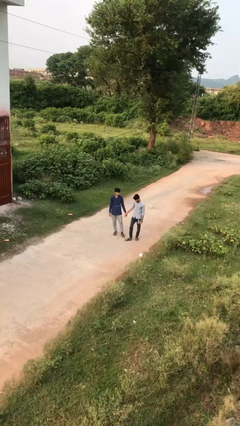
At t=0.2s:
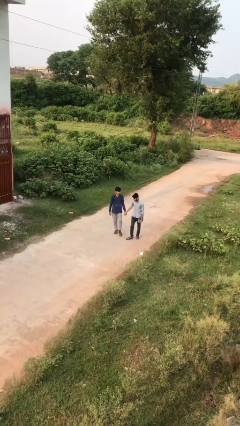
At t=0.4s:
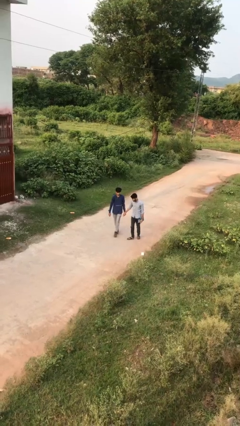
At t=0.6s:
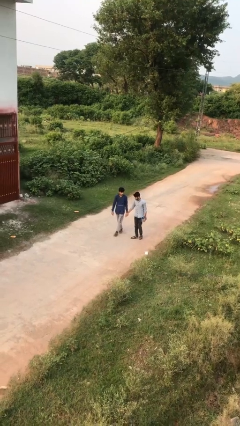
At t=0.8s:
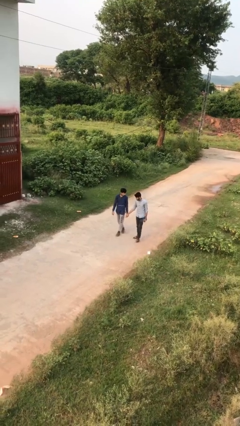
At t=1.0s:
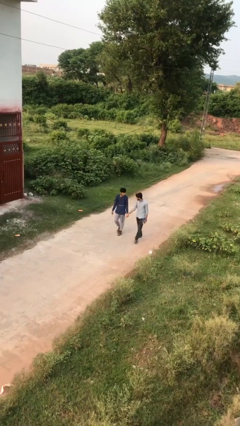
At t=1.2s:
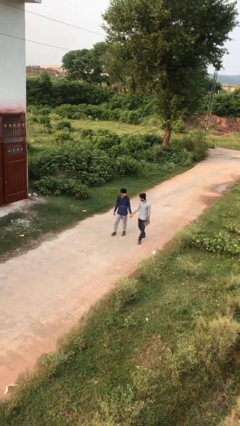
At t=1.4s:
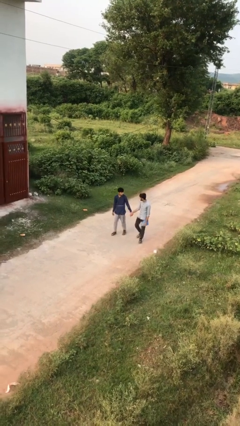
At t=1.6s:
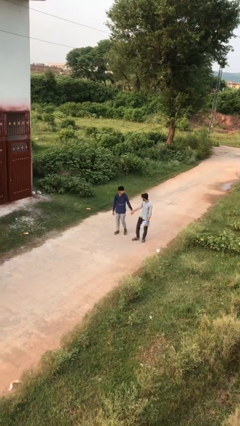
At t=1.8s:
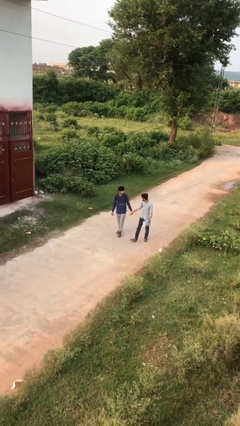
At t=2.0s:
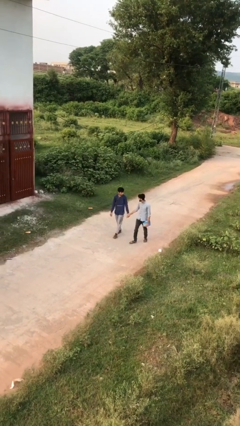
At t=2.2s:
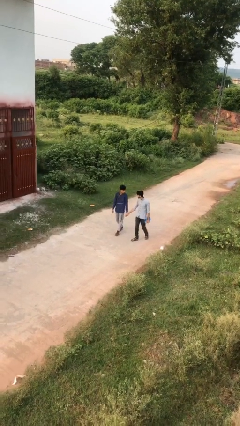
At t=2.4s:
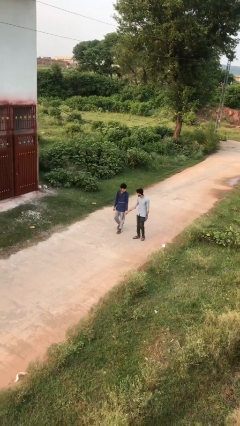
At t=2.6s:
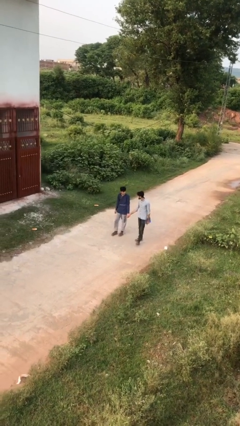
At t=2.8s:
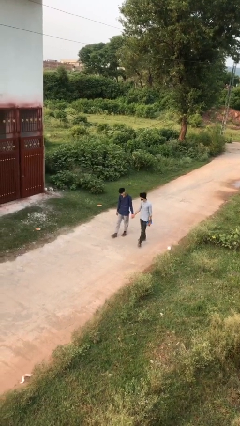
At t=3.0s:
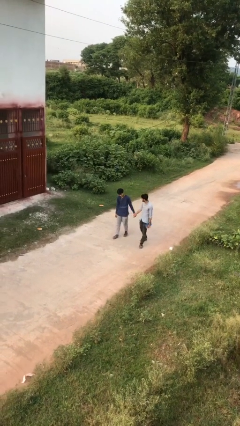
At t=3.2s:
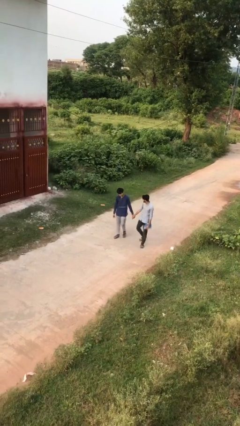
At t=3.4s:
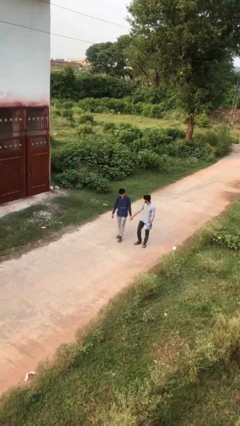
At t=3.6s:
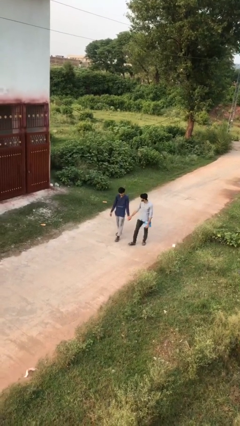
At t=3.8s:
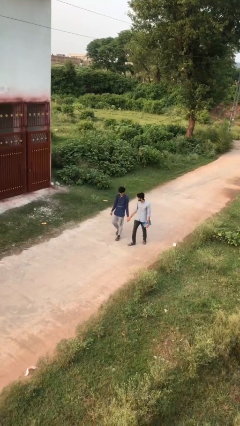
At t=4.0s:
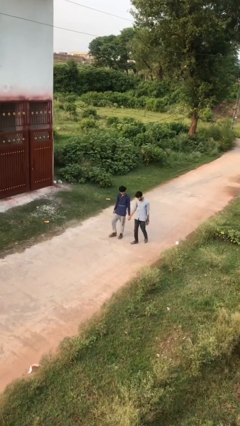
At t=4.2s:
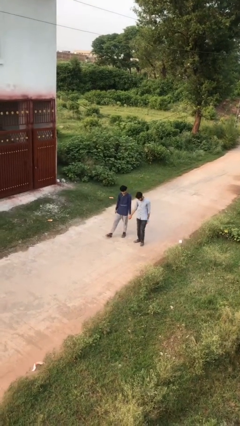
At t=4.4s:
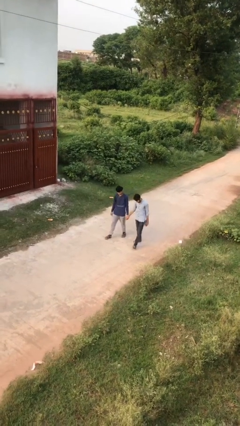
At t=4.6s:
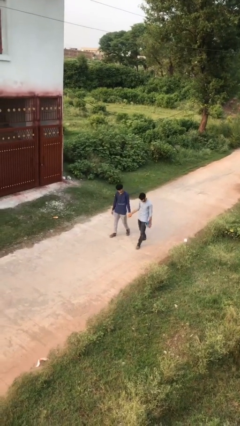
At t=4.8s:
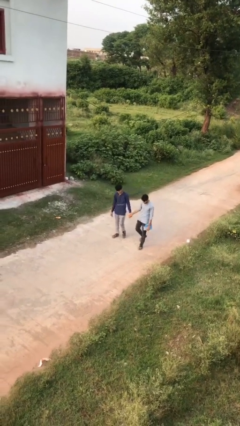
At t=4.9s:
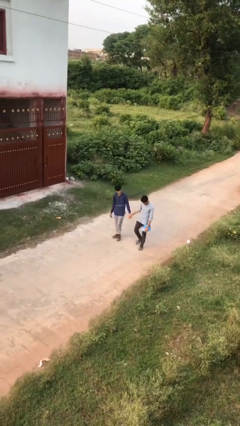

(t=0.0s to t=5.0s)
person holds hand

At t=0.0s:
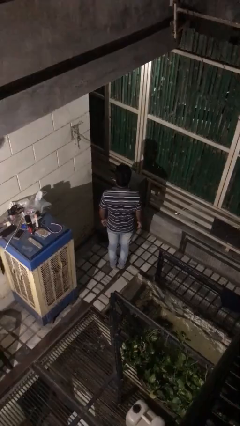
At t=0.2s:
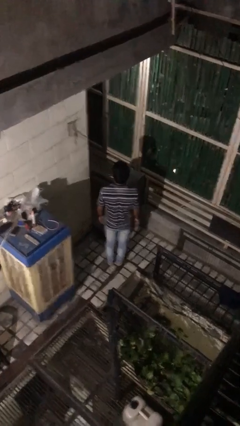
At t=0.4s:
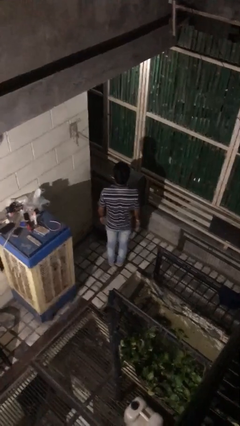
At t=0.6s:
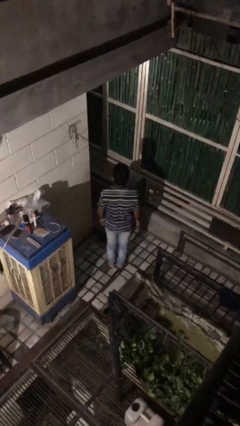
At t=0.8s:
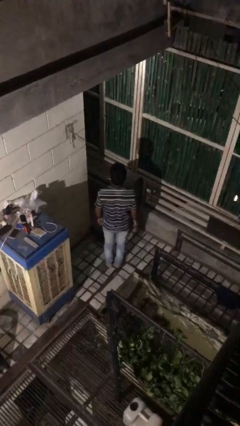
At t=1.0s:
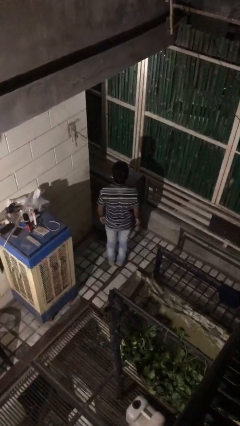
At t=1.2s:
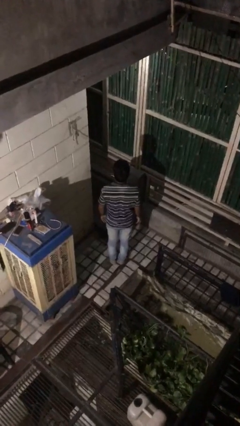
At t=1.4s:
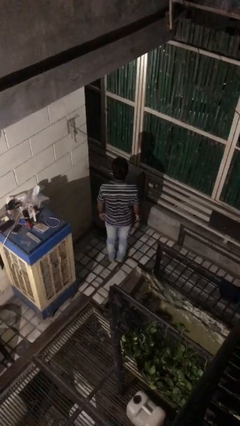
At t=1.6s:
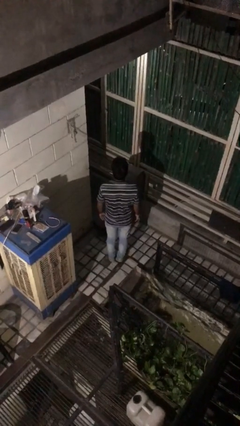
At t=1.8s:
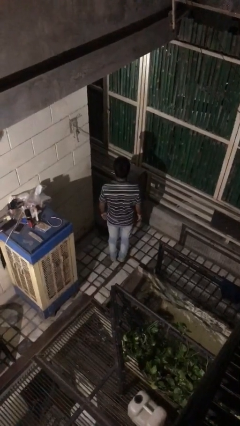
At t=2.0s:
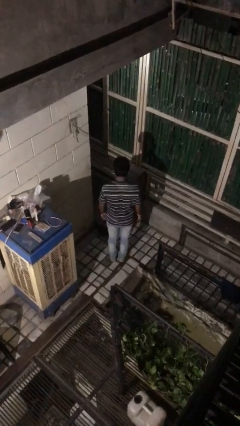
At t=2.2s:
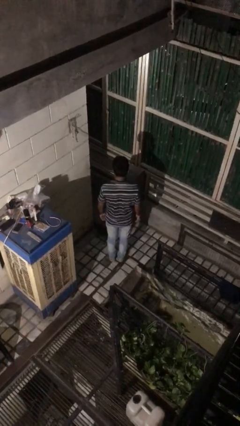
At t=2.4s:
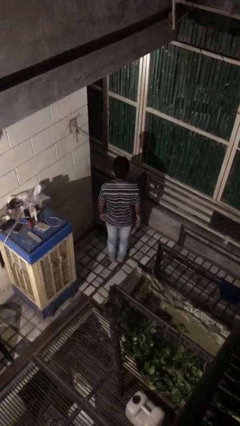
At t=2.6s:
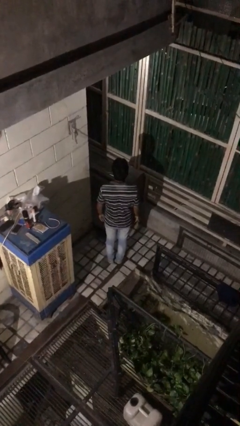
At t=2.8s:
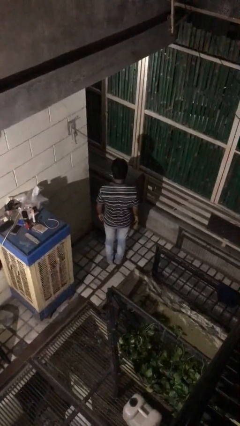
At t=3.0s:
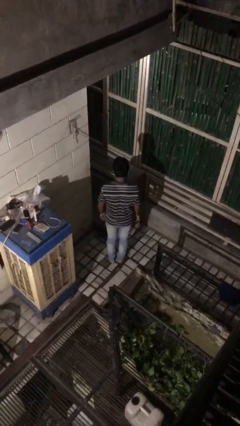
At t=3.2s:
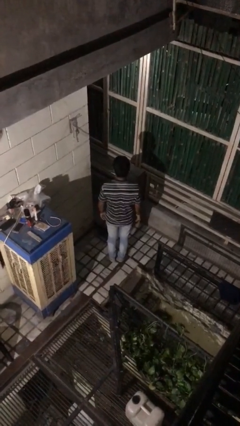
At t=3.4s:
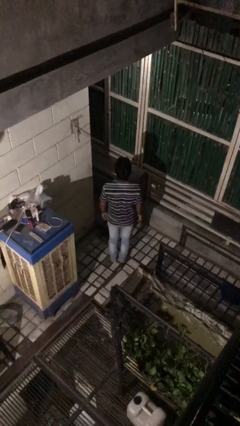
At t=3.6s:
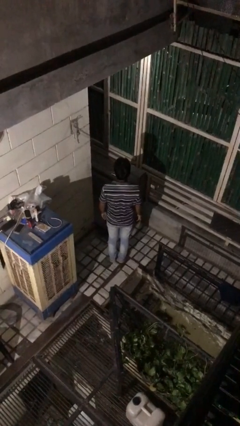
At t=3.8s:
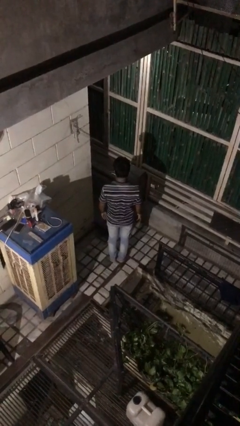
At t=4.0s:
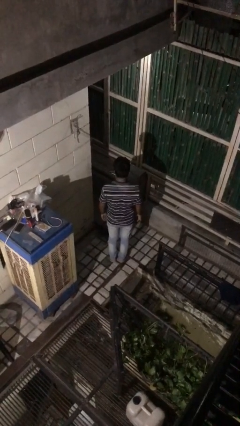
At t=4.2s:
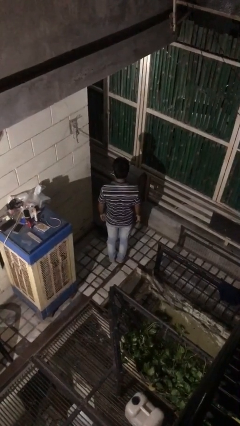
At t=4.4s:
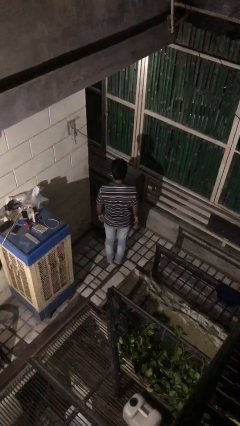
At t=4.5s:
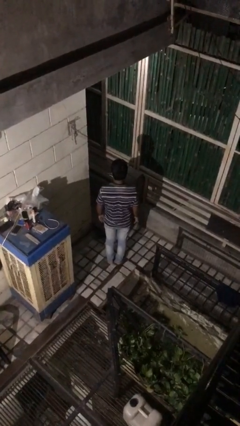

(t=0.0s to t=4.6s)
person nods head

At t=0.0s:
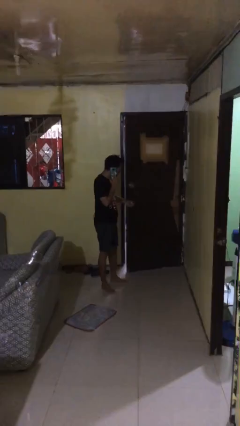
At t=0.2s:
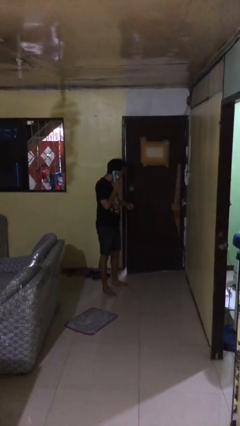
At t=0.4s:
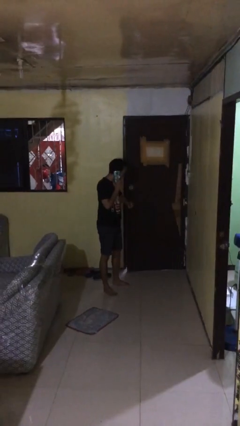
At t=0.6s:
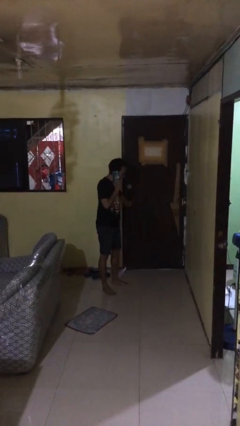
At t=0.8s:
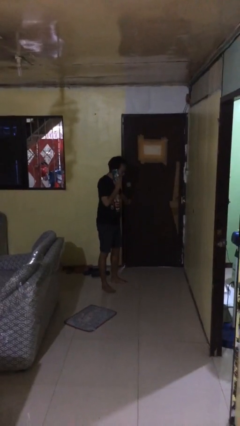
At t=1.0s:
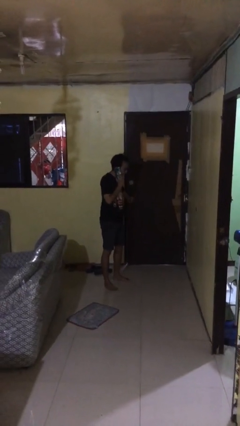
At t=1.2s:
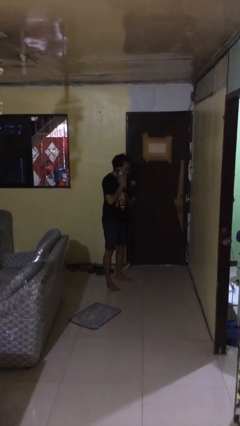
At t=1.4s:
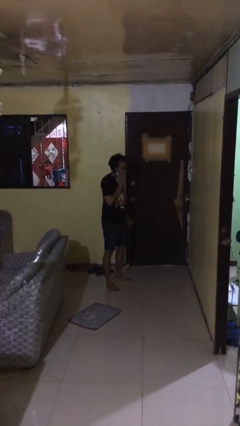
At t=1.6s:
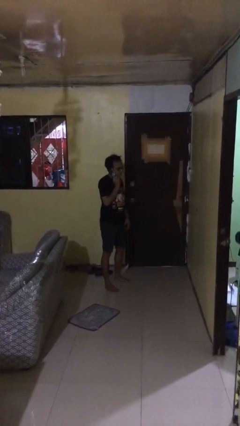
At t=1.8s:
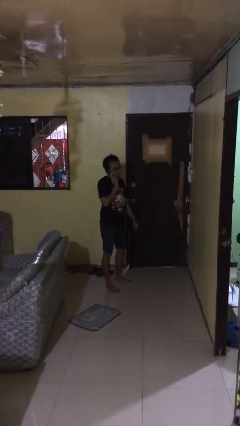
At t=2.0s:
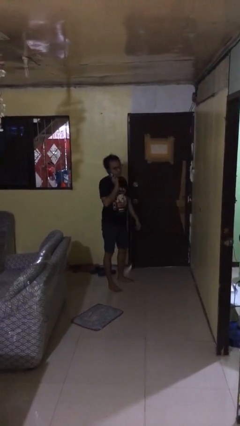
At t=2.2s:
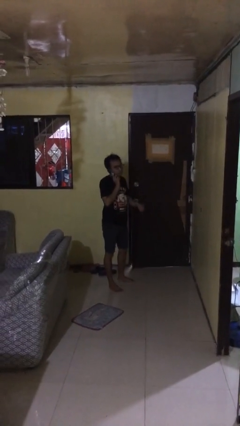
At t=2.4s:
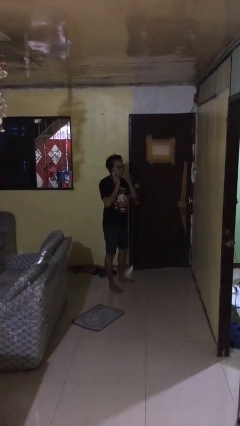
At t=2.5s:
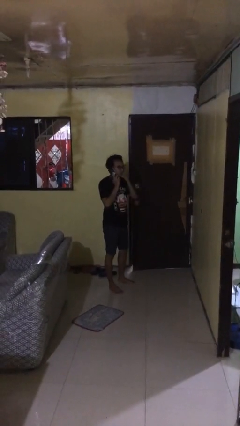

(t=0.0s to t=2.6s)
person closes facility door

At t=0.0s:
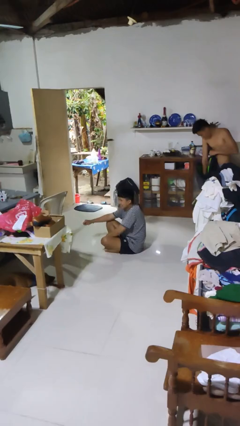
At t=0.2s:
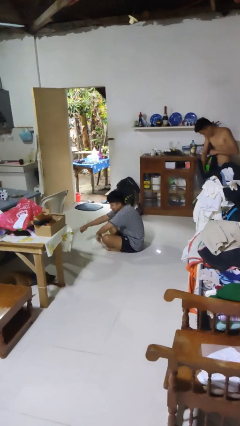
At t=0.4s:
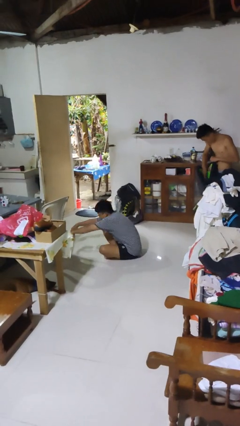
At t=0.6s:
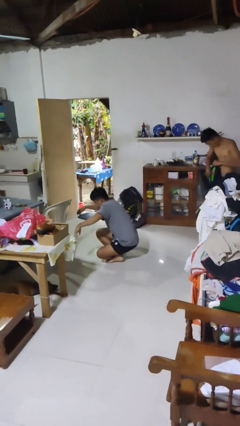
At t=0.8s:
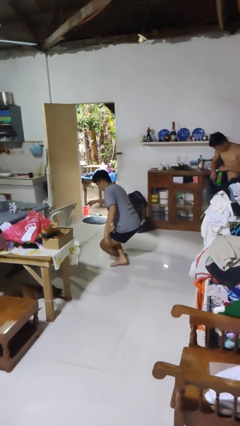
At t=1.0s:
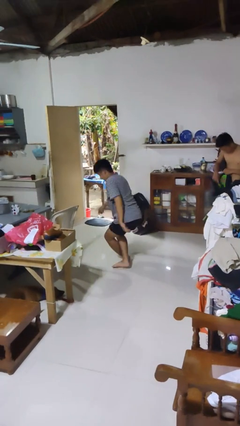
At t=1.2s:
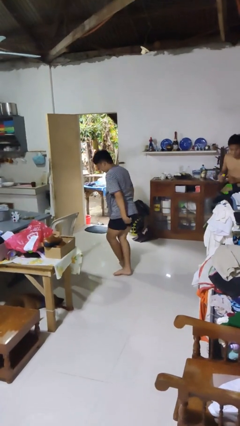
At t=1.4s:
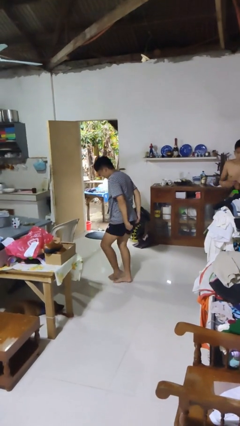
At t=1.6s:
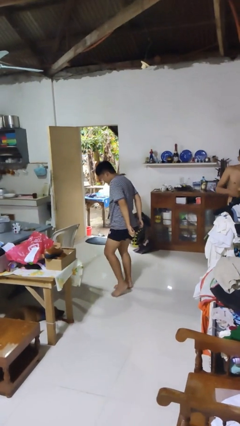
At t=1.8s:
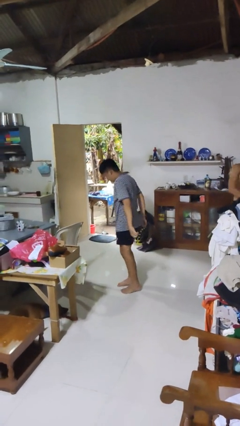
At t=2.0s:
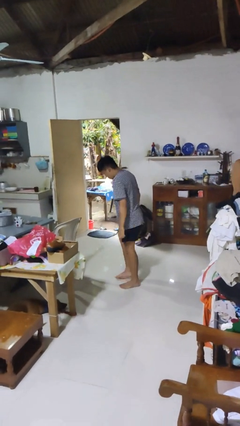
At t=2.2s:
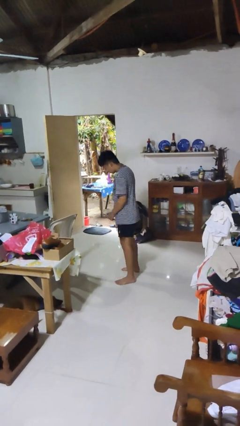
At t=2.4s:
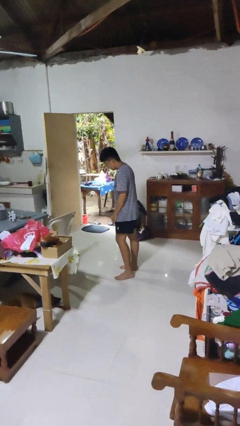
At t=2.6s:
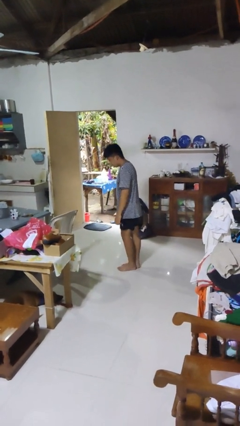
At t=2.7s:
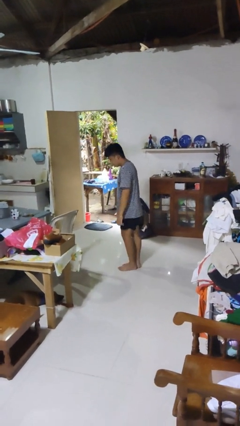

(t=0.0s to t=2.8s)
person stands up from floor

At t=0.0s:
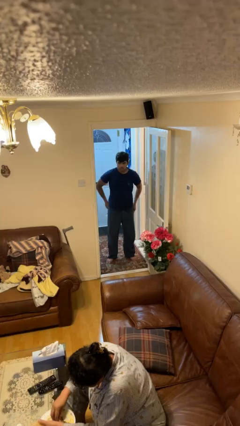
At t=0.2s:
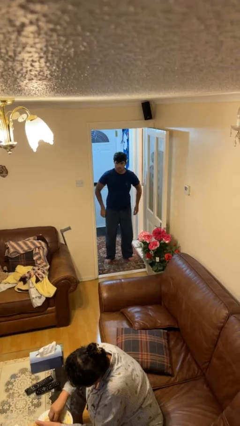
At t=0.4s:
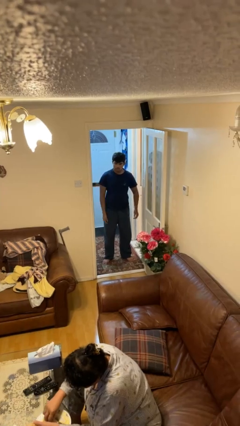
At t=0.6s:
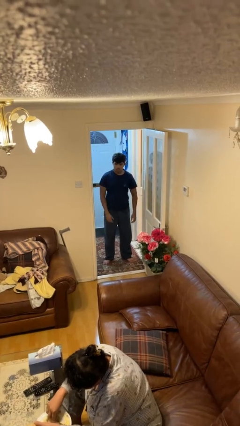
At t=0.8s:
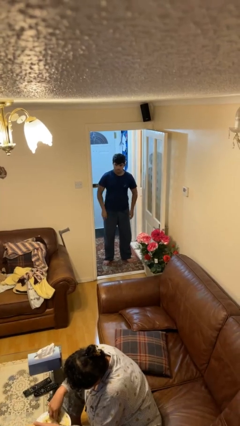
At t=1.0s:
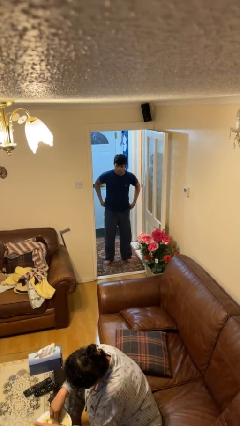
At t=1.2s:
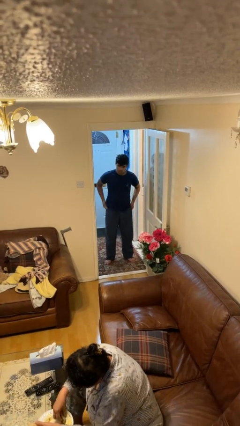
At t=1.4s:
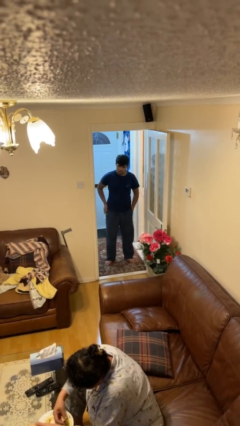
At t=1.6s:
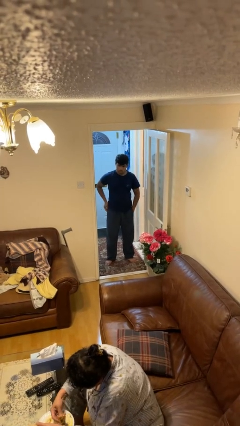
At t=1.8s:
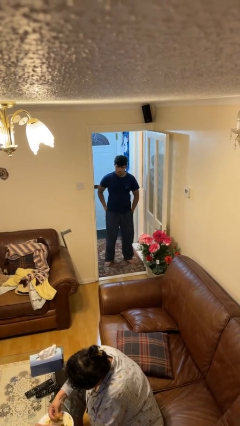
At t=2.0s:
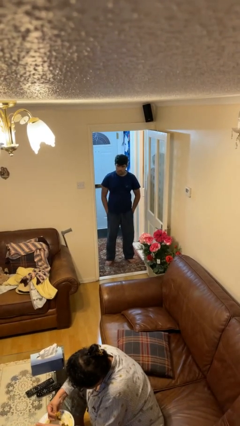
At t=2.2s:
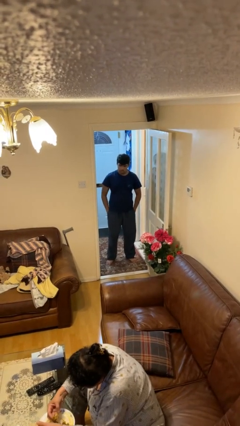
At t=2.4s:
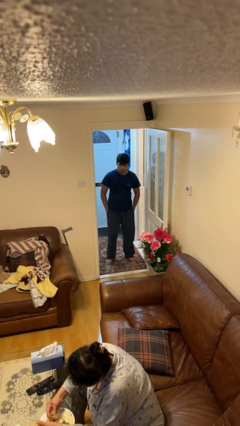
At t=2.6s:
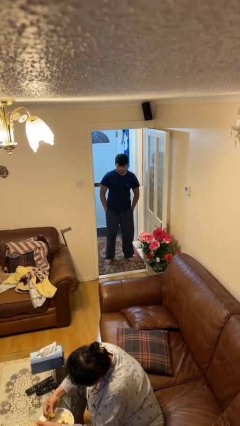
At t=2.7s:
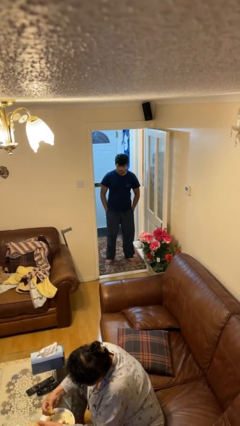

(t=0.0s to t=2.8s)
person puts hands in back pockets
